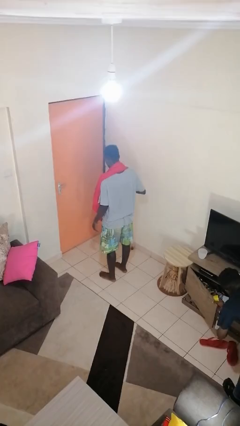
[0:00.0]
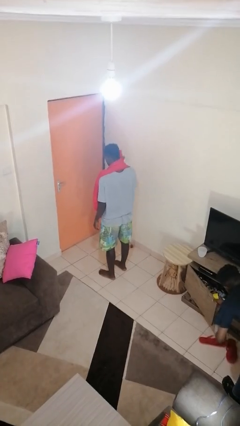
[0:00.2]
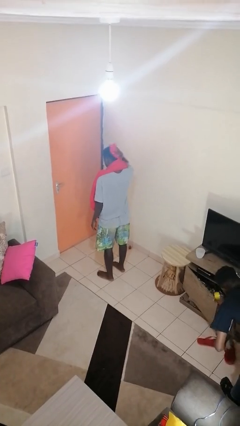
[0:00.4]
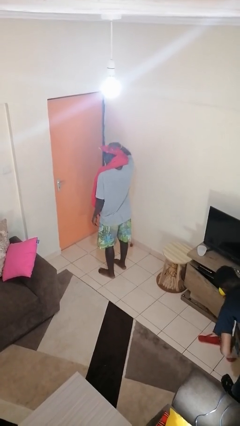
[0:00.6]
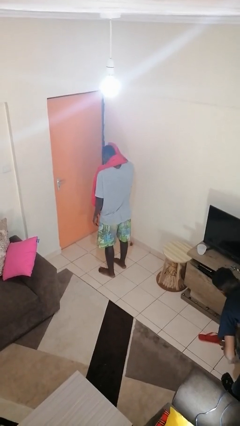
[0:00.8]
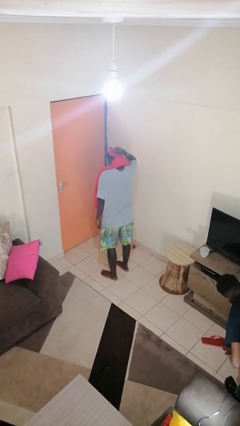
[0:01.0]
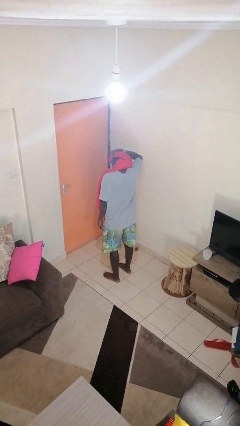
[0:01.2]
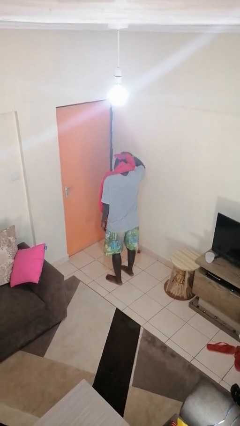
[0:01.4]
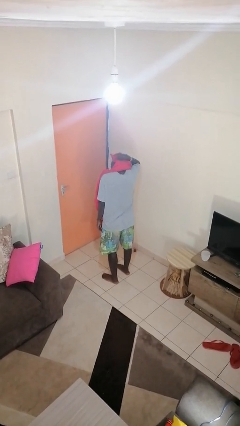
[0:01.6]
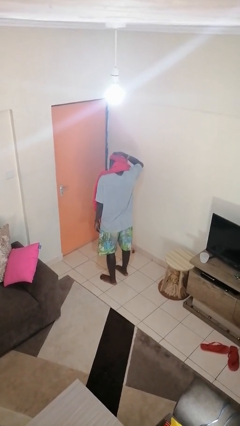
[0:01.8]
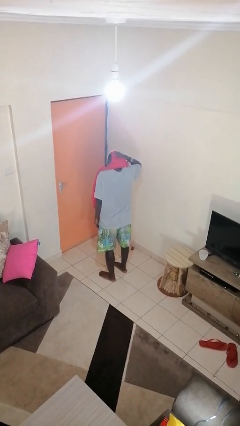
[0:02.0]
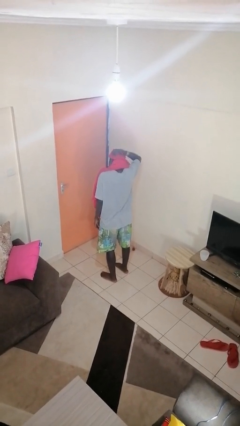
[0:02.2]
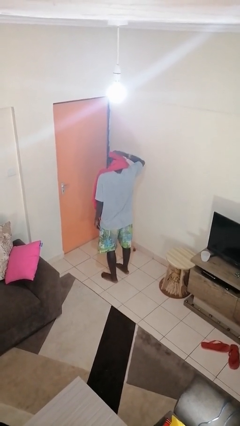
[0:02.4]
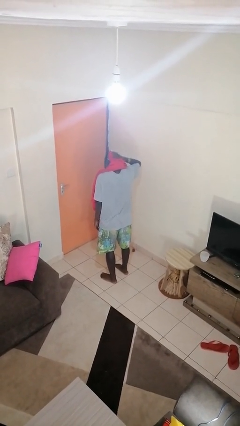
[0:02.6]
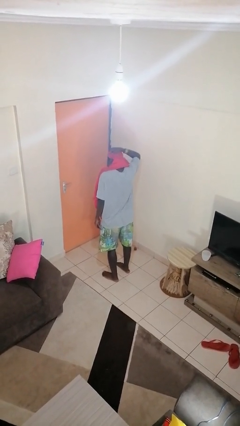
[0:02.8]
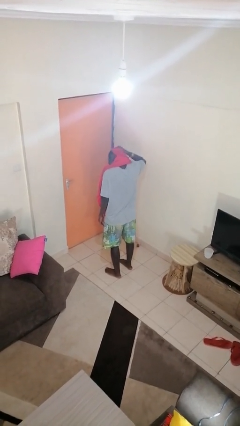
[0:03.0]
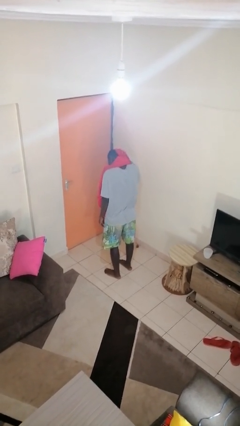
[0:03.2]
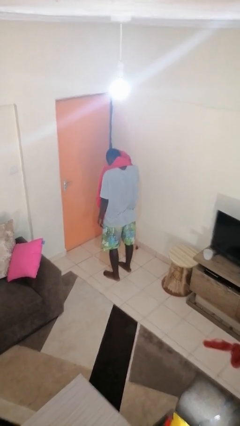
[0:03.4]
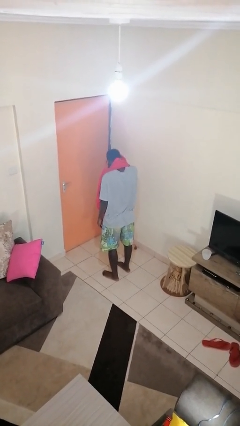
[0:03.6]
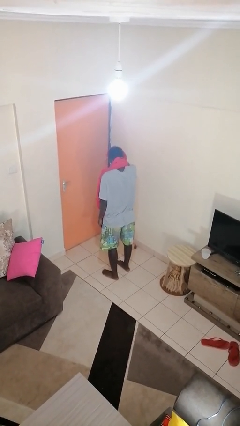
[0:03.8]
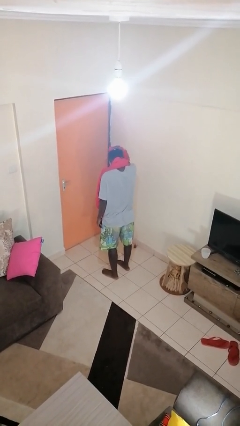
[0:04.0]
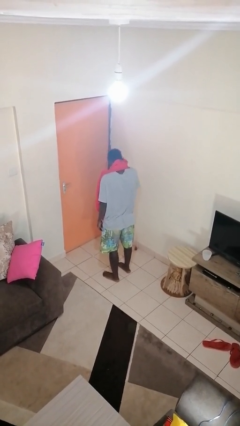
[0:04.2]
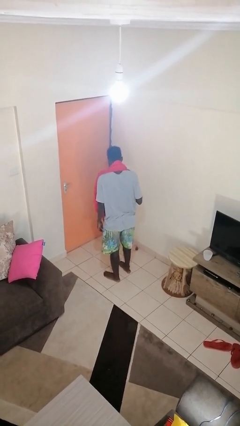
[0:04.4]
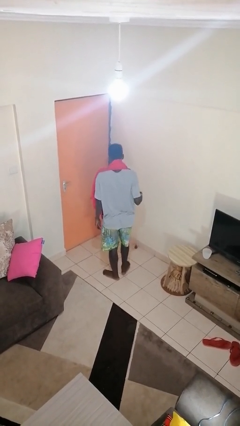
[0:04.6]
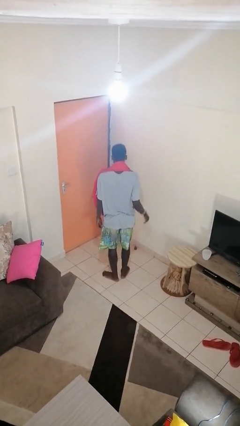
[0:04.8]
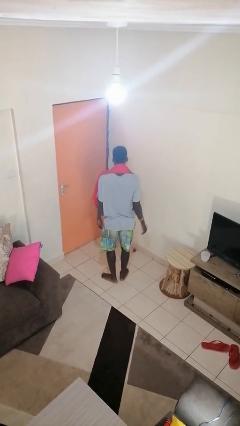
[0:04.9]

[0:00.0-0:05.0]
person dries hair with towel

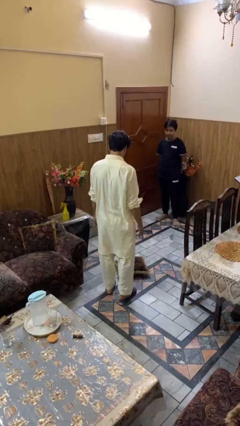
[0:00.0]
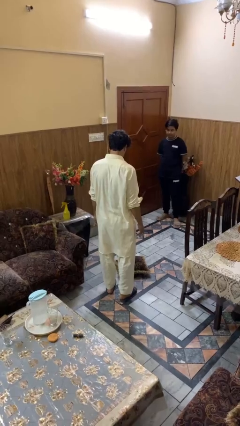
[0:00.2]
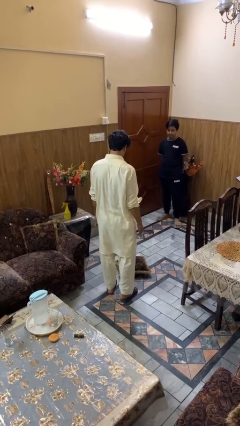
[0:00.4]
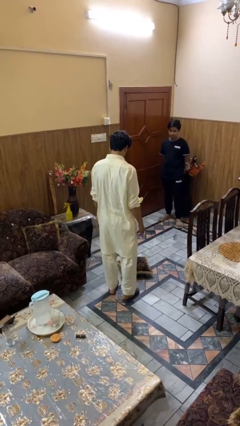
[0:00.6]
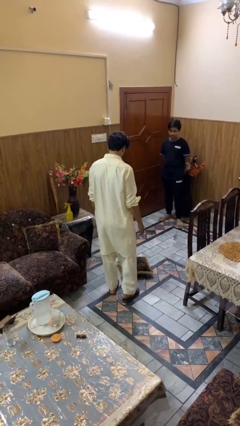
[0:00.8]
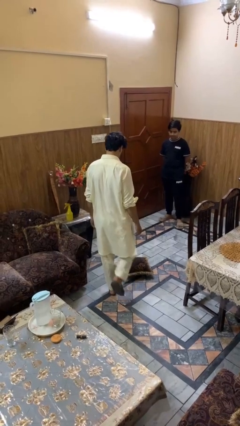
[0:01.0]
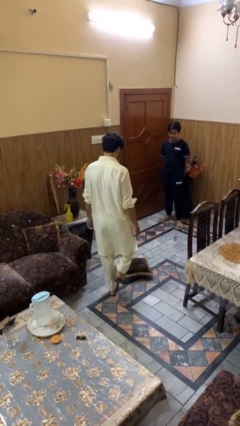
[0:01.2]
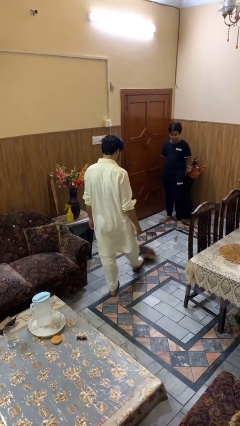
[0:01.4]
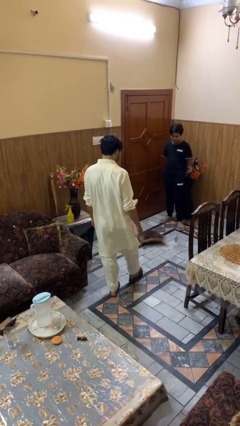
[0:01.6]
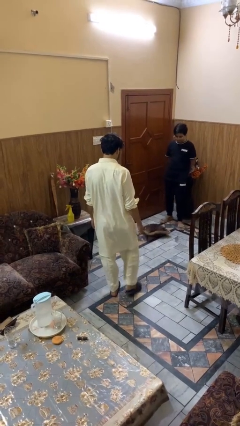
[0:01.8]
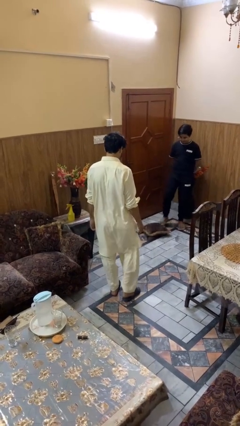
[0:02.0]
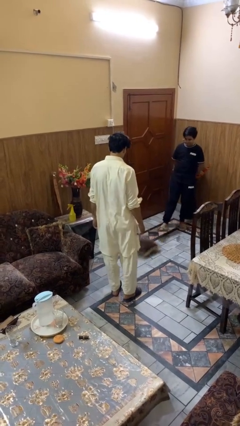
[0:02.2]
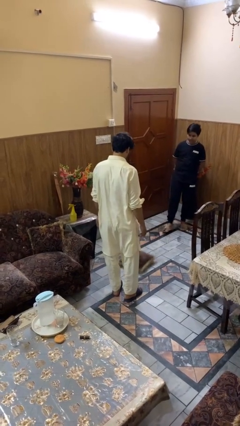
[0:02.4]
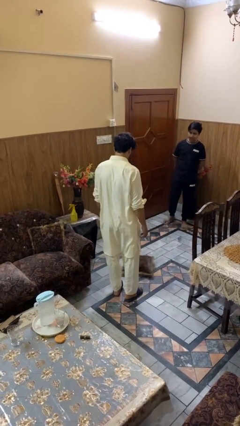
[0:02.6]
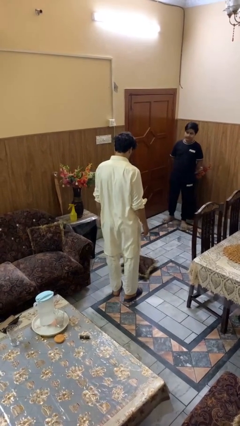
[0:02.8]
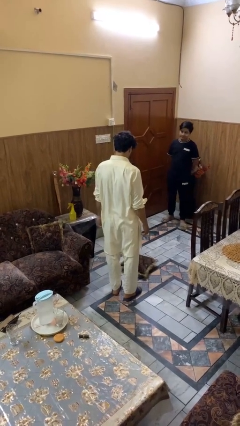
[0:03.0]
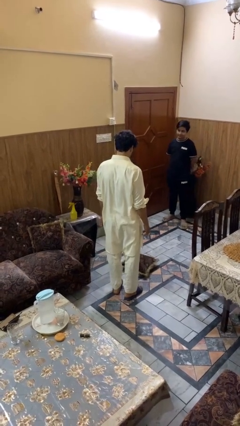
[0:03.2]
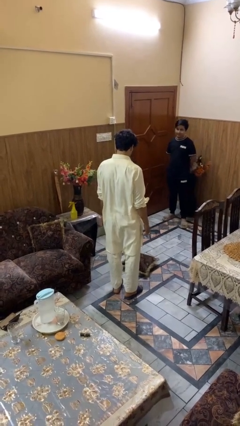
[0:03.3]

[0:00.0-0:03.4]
person kicks object to person

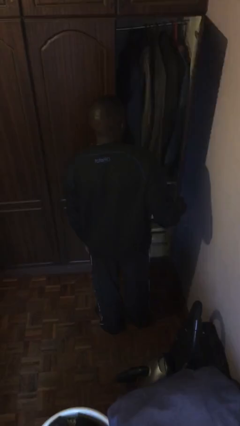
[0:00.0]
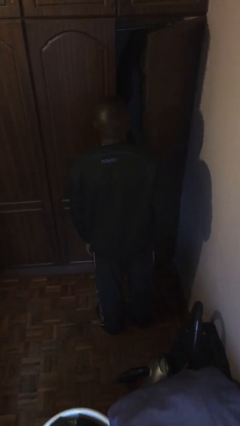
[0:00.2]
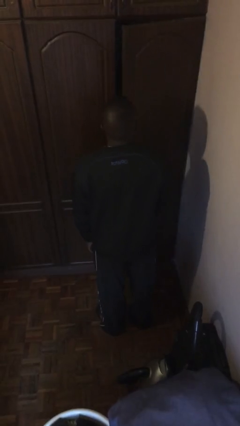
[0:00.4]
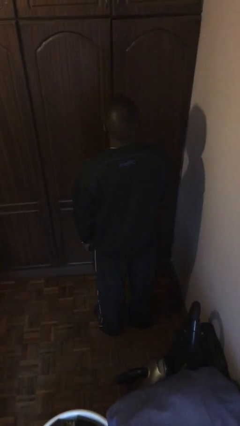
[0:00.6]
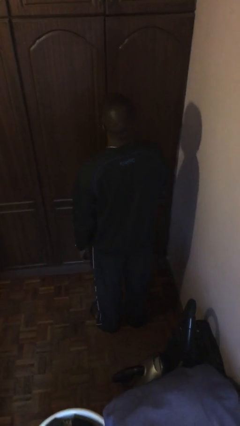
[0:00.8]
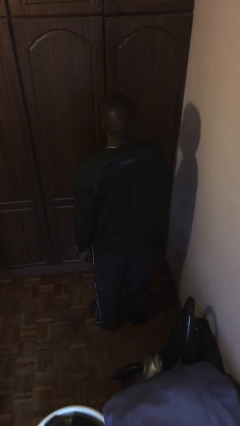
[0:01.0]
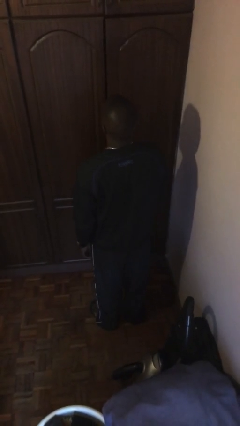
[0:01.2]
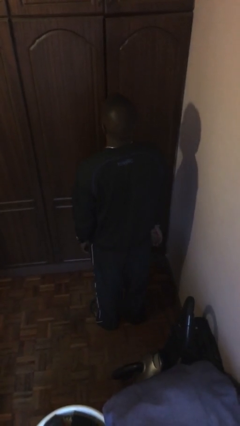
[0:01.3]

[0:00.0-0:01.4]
person closes closet door

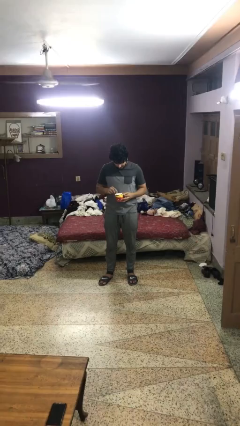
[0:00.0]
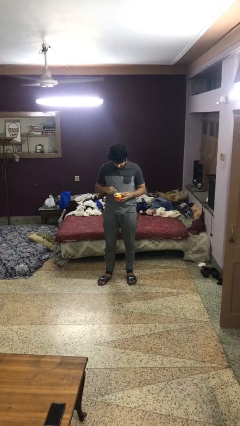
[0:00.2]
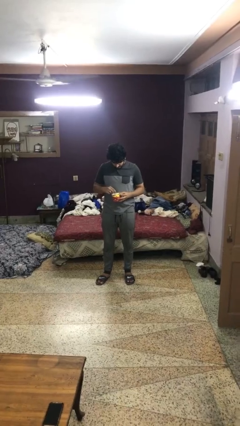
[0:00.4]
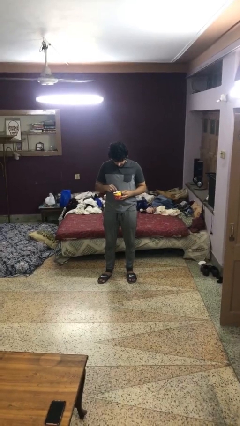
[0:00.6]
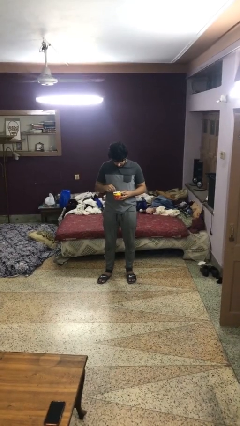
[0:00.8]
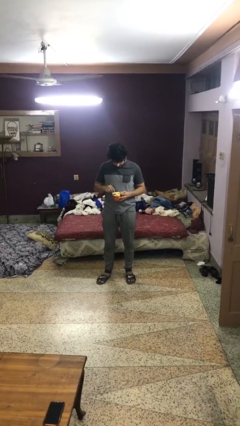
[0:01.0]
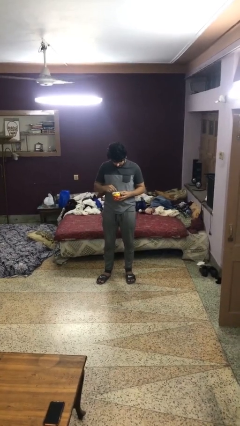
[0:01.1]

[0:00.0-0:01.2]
person stirs mug

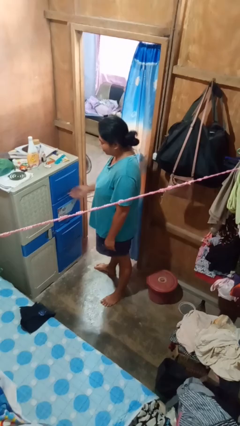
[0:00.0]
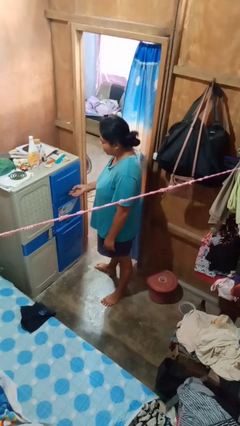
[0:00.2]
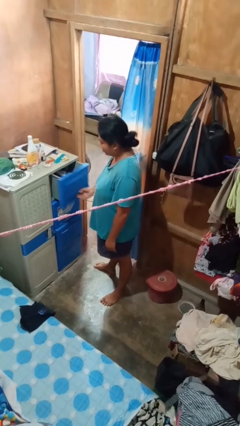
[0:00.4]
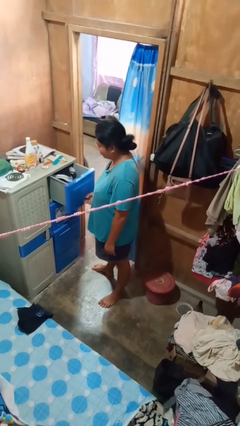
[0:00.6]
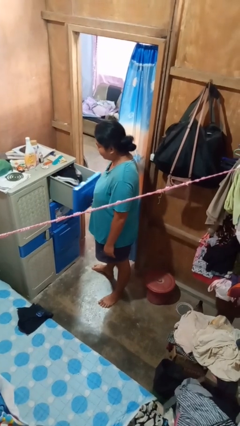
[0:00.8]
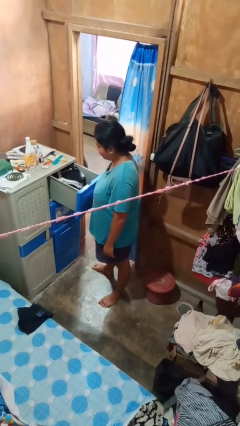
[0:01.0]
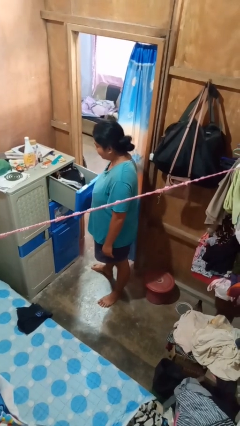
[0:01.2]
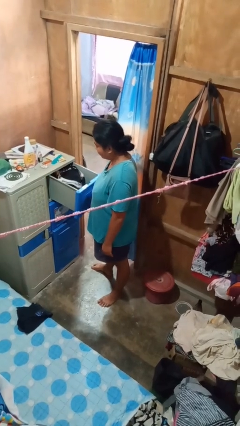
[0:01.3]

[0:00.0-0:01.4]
person opens dresser drawer

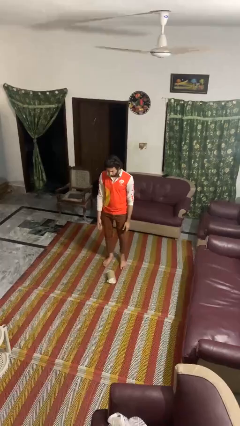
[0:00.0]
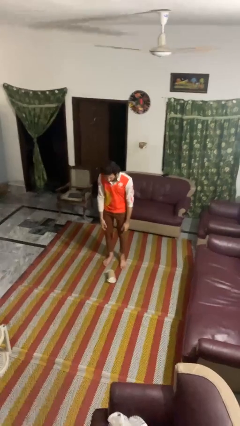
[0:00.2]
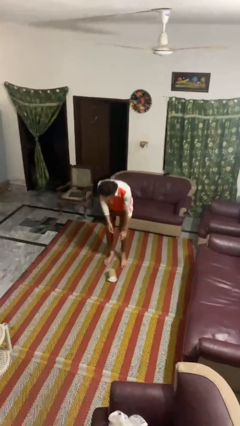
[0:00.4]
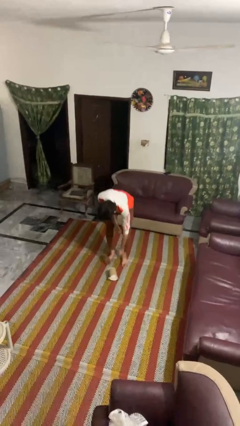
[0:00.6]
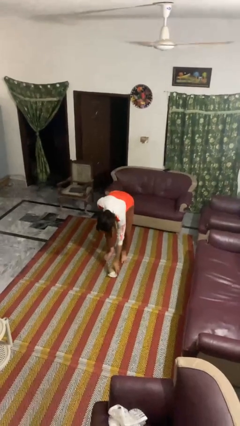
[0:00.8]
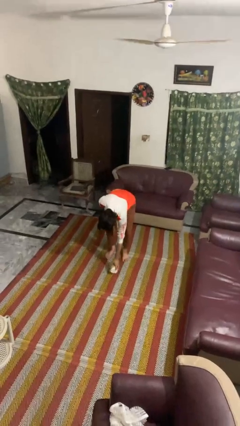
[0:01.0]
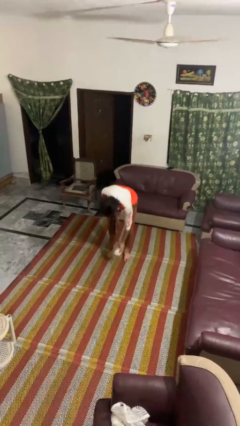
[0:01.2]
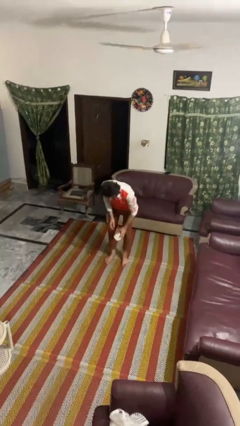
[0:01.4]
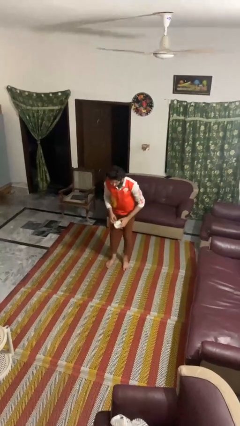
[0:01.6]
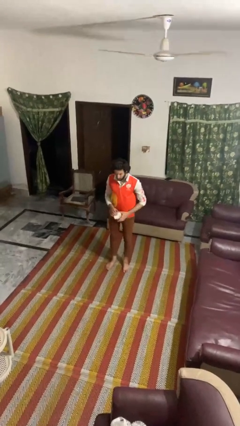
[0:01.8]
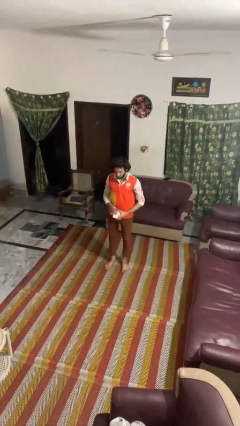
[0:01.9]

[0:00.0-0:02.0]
person picks up object from floor

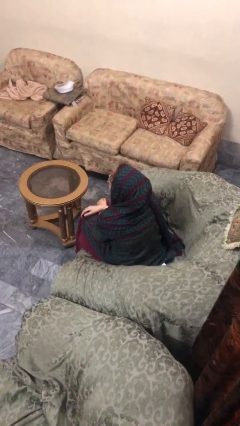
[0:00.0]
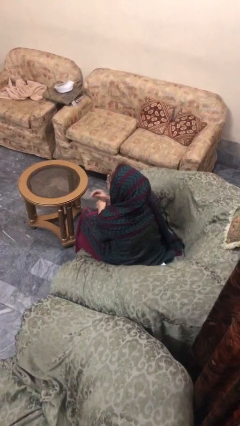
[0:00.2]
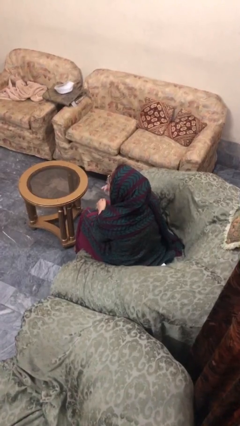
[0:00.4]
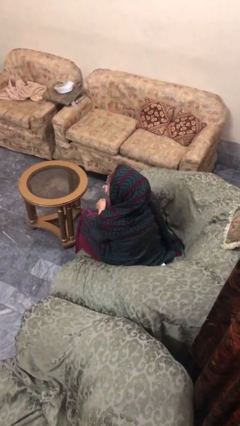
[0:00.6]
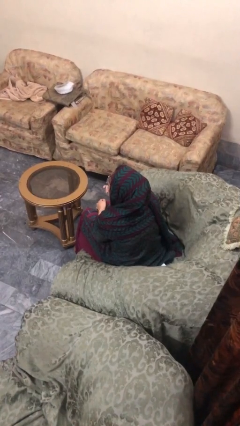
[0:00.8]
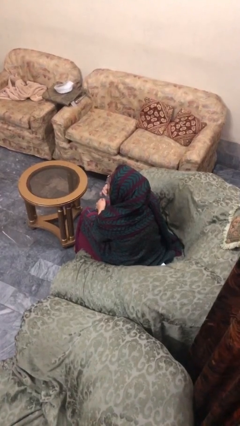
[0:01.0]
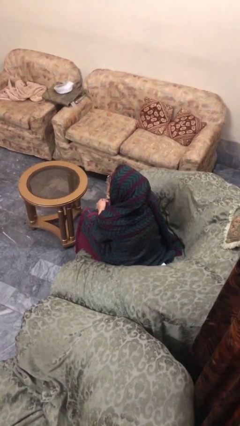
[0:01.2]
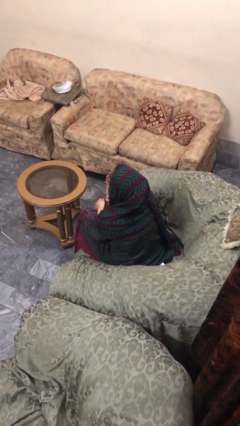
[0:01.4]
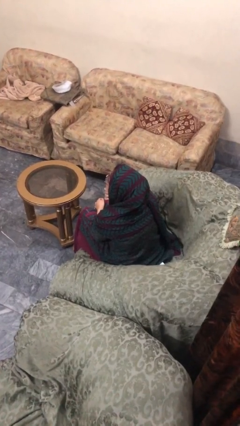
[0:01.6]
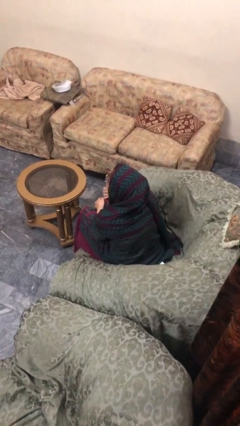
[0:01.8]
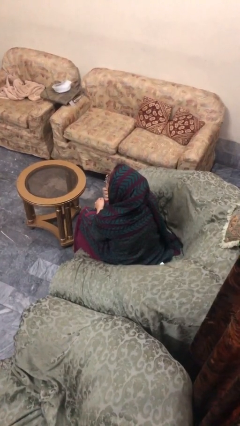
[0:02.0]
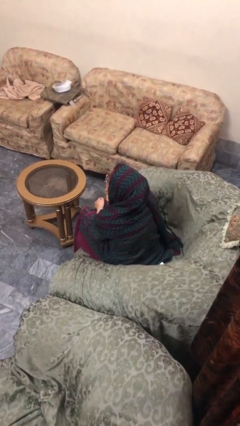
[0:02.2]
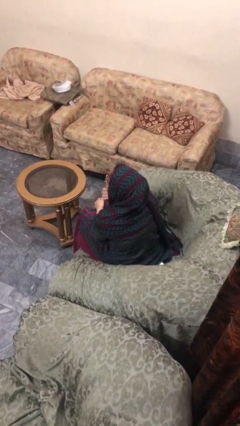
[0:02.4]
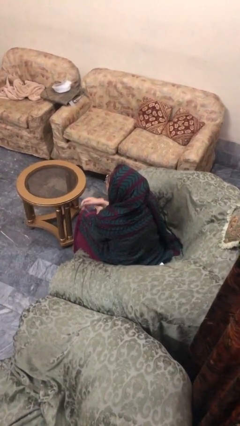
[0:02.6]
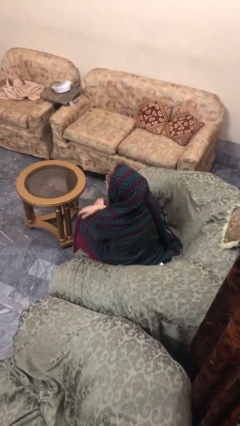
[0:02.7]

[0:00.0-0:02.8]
person strokes chin
